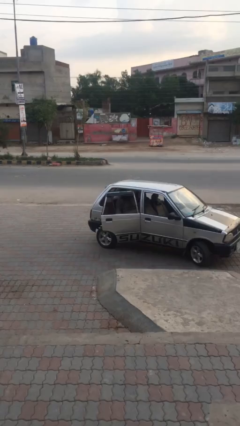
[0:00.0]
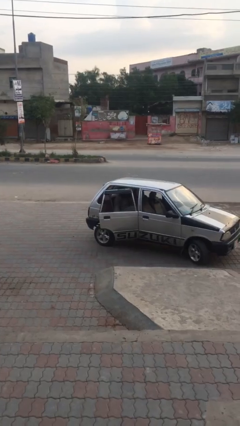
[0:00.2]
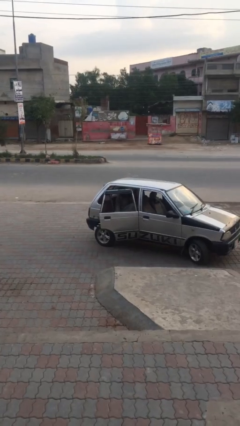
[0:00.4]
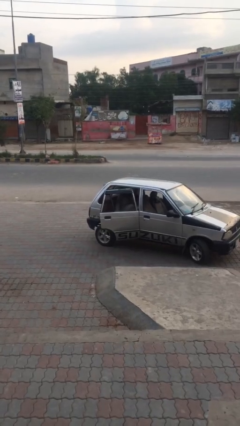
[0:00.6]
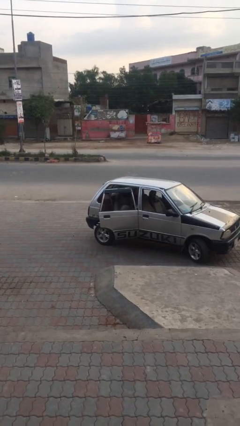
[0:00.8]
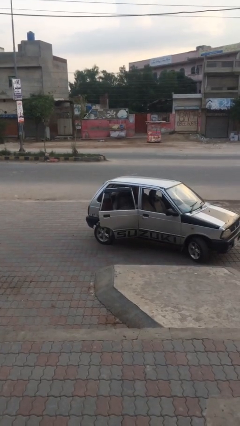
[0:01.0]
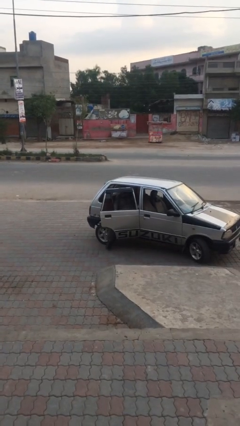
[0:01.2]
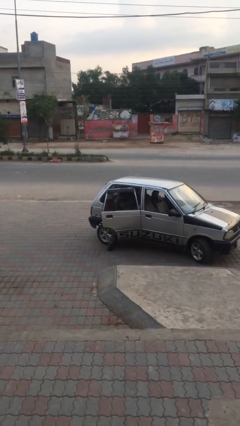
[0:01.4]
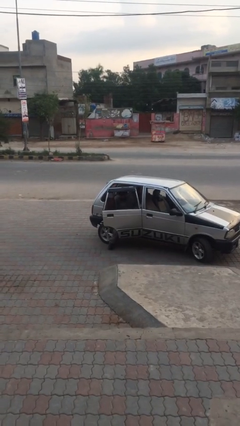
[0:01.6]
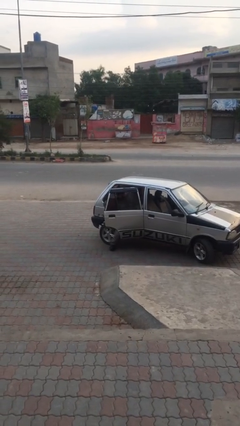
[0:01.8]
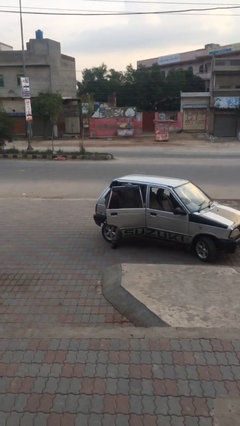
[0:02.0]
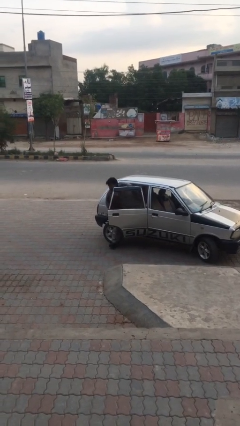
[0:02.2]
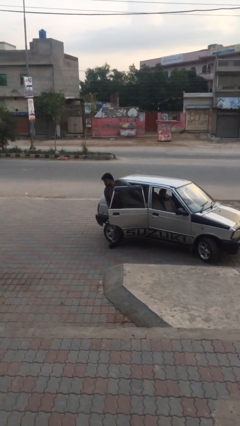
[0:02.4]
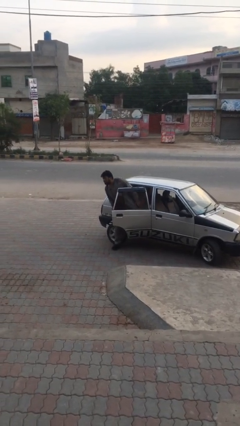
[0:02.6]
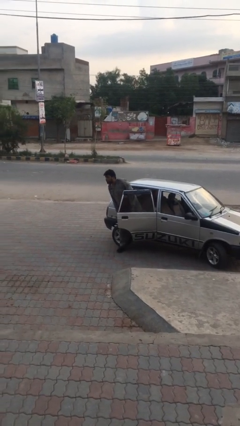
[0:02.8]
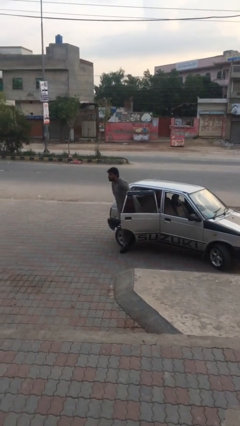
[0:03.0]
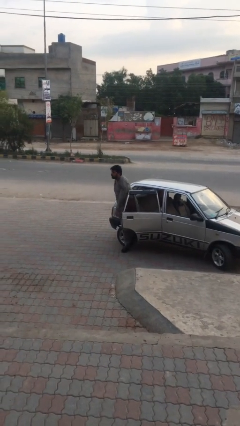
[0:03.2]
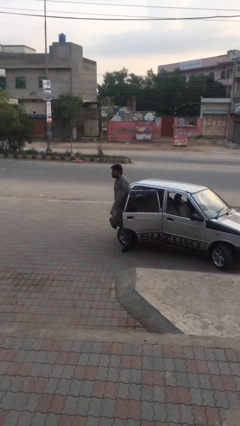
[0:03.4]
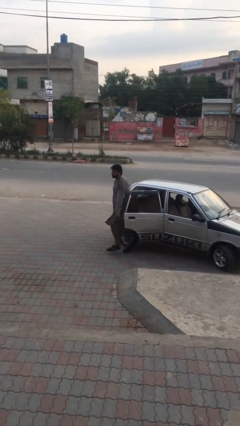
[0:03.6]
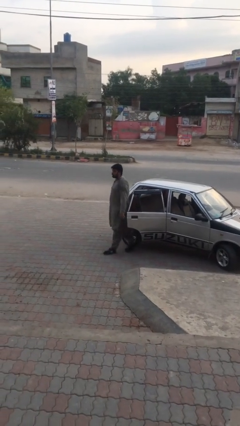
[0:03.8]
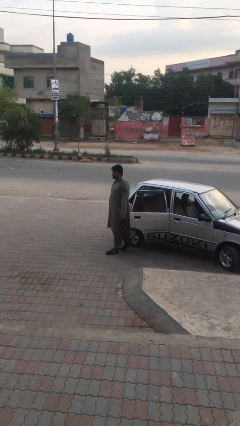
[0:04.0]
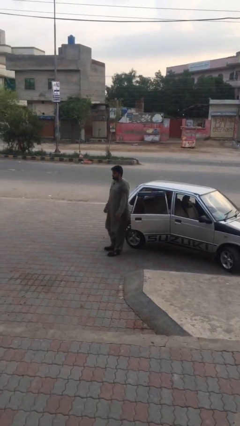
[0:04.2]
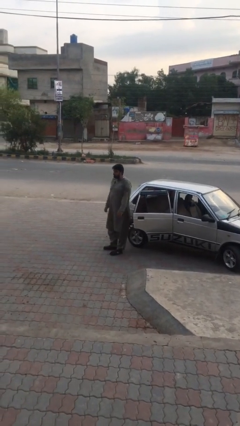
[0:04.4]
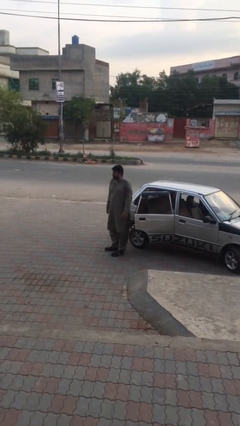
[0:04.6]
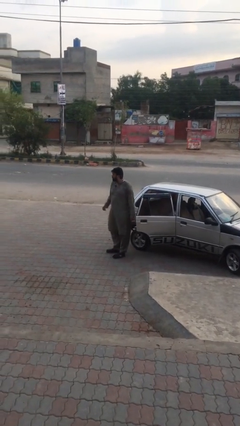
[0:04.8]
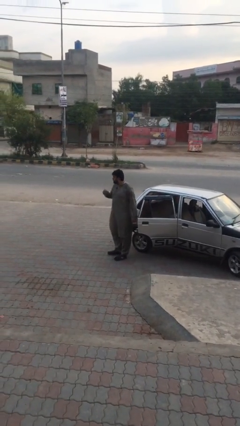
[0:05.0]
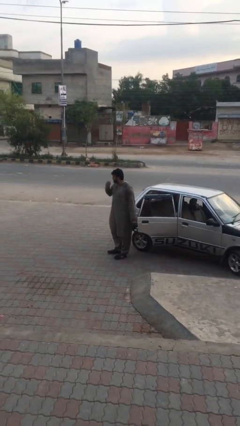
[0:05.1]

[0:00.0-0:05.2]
person exits car

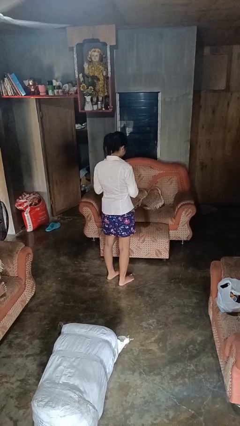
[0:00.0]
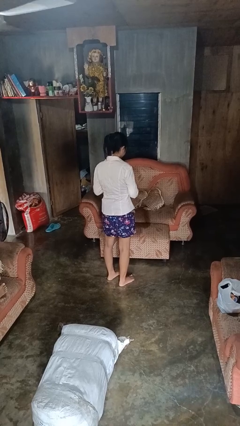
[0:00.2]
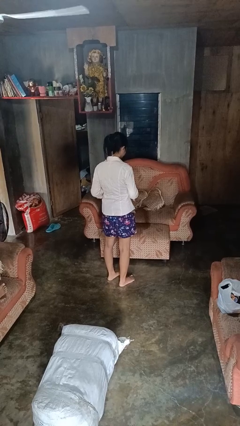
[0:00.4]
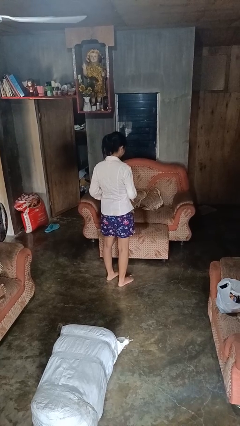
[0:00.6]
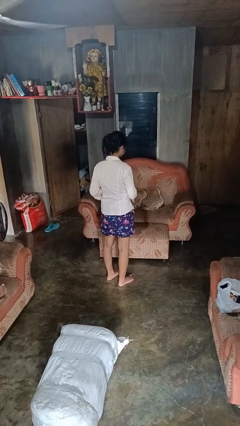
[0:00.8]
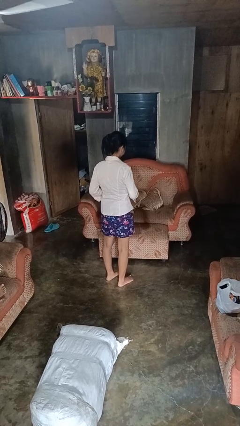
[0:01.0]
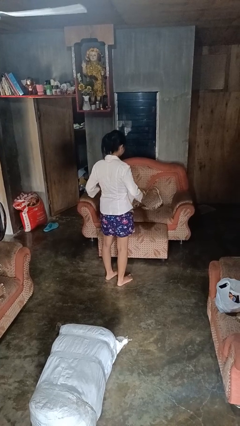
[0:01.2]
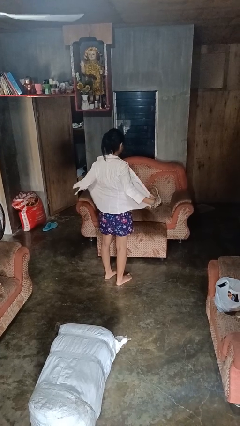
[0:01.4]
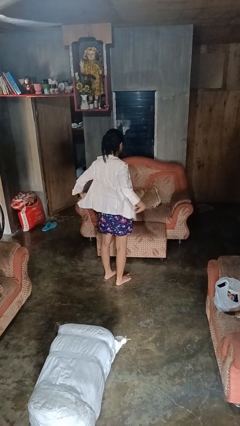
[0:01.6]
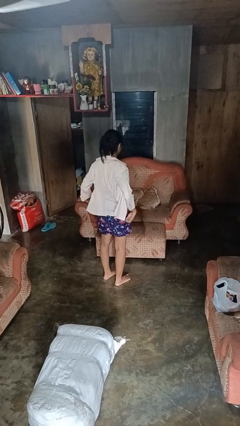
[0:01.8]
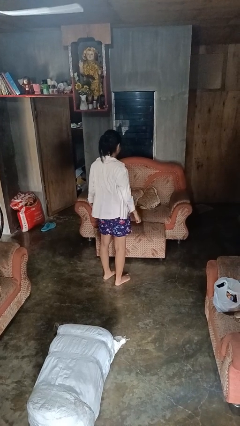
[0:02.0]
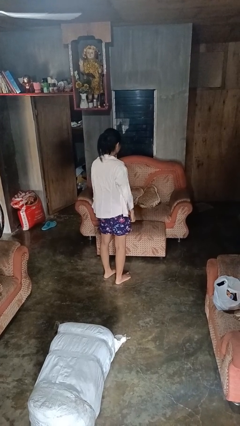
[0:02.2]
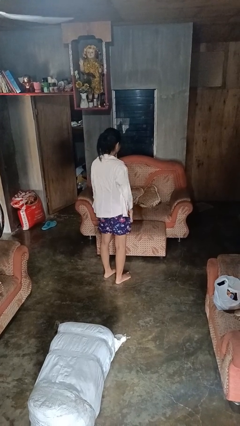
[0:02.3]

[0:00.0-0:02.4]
person unbuttons shirt

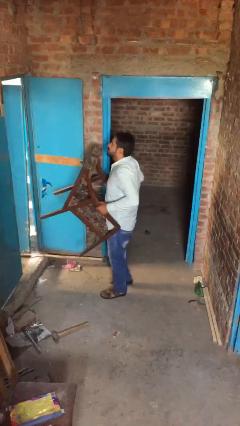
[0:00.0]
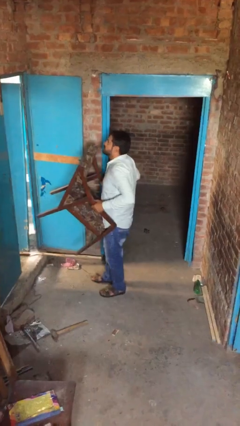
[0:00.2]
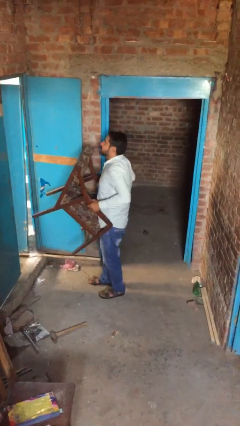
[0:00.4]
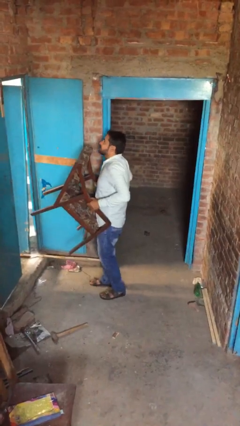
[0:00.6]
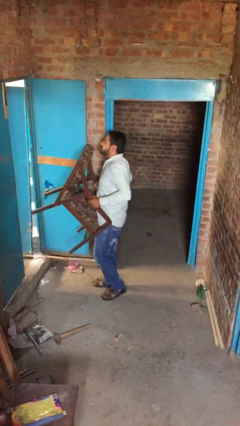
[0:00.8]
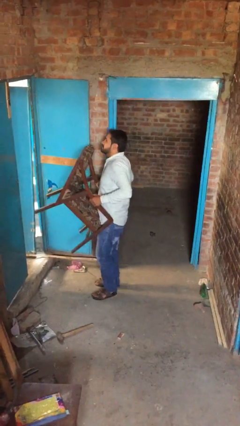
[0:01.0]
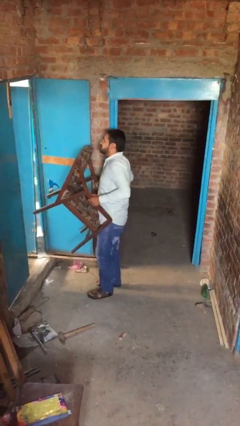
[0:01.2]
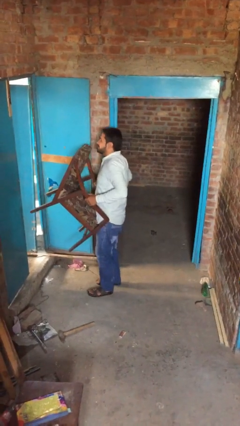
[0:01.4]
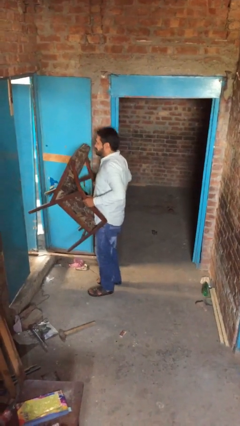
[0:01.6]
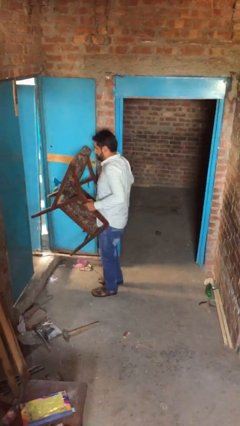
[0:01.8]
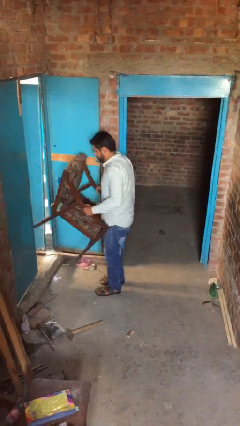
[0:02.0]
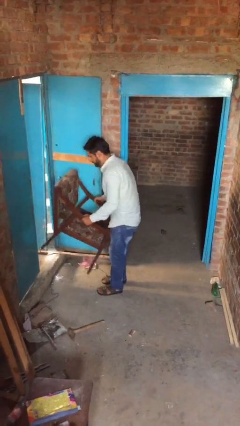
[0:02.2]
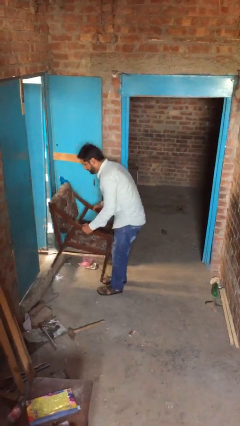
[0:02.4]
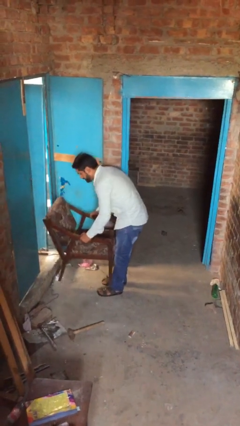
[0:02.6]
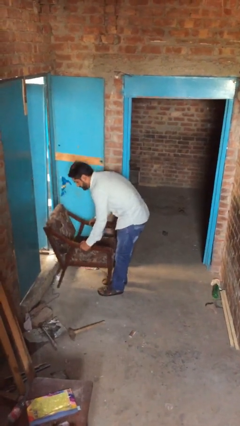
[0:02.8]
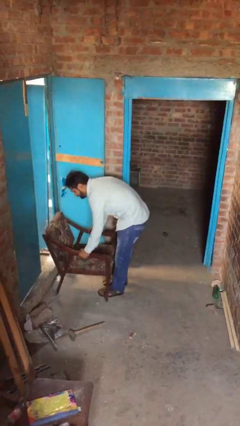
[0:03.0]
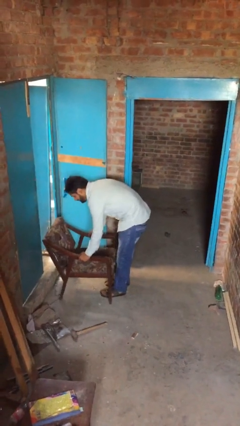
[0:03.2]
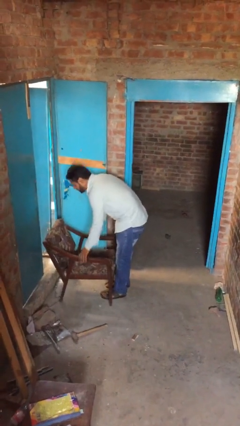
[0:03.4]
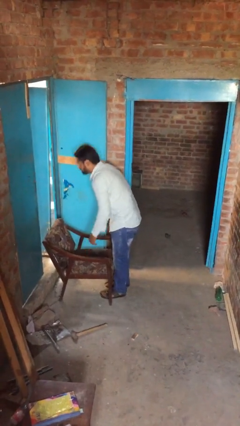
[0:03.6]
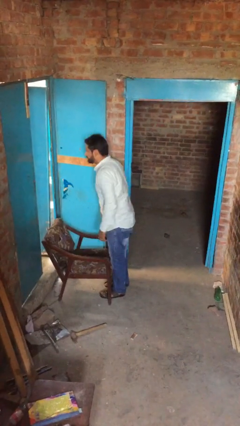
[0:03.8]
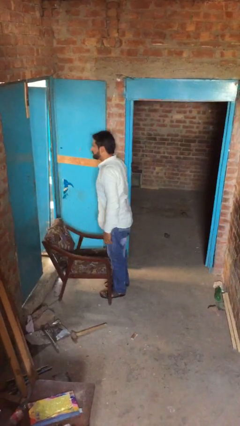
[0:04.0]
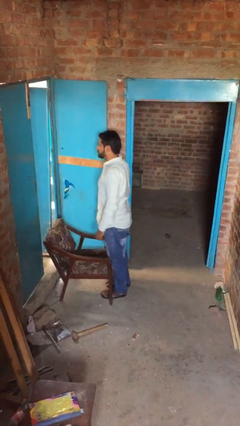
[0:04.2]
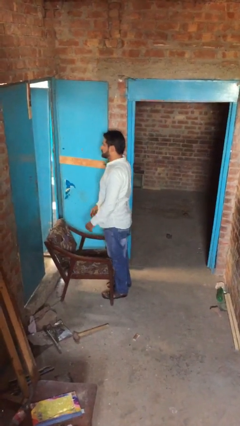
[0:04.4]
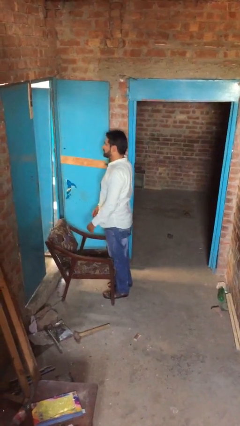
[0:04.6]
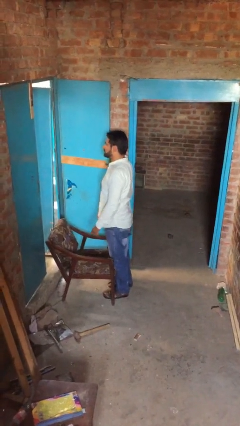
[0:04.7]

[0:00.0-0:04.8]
person puts down object on floor

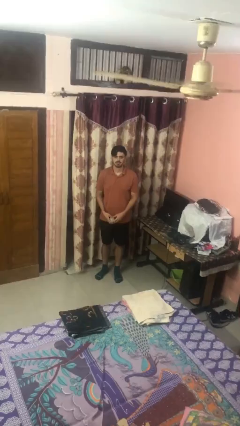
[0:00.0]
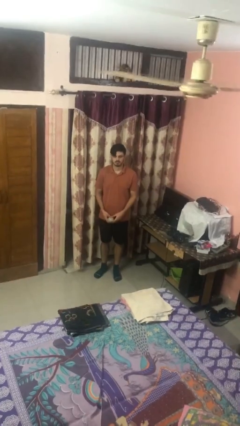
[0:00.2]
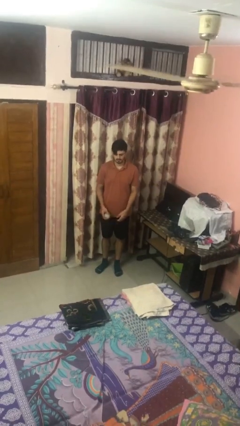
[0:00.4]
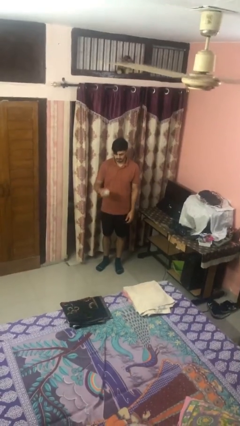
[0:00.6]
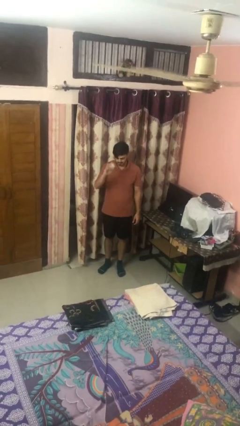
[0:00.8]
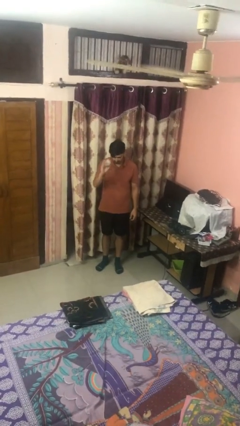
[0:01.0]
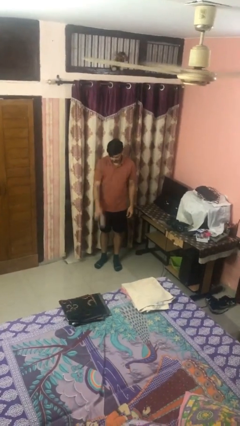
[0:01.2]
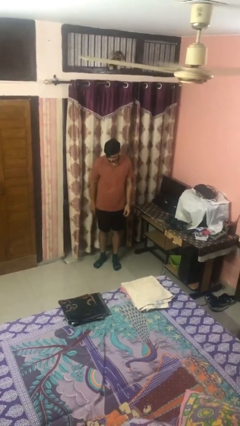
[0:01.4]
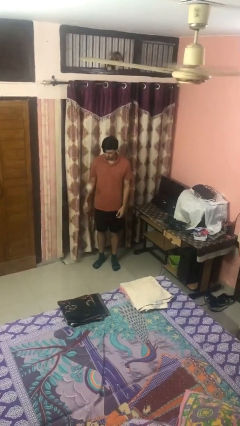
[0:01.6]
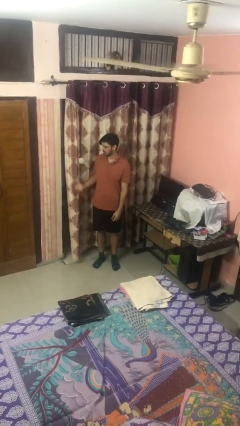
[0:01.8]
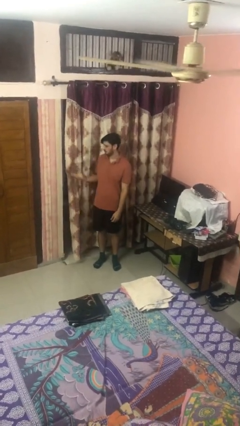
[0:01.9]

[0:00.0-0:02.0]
person bounces ball on floor

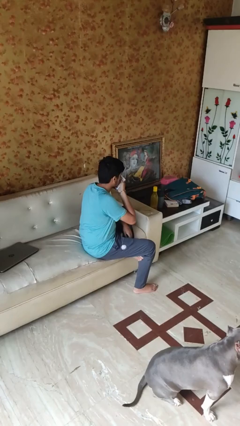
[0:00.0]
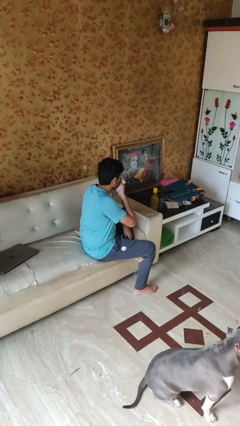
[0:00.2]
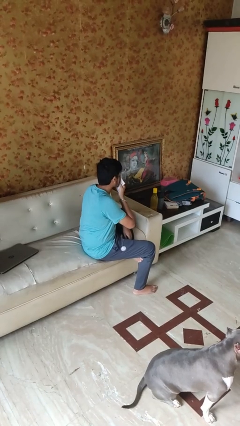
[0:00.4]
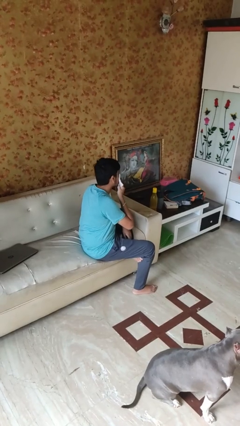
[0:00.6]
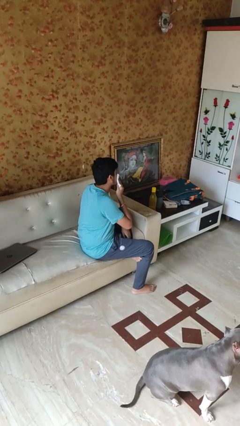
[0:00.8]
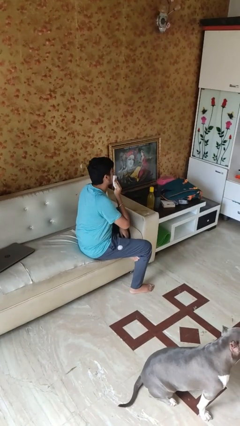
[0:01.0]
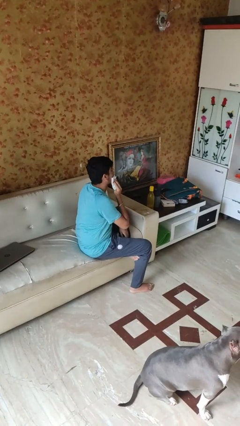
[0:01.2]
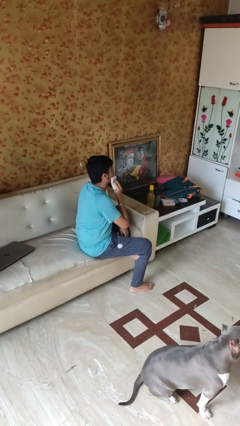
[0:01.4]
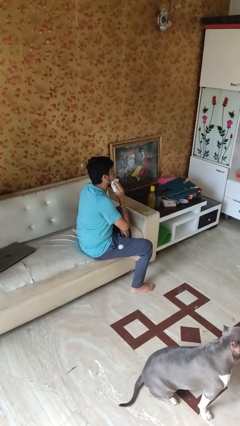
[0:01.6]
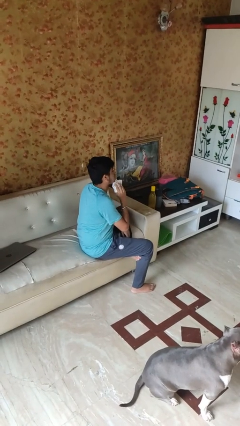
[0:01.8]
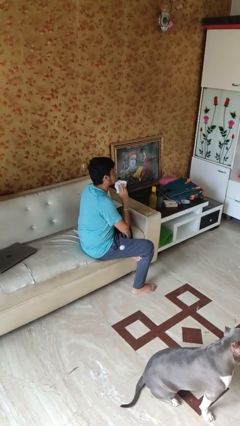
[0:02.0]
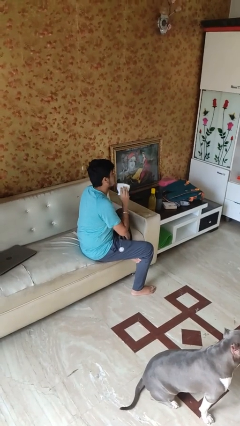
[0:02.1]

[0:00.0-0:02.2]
person wipes mouth with napkin

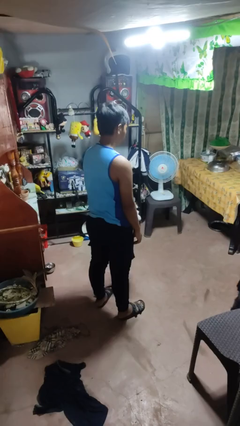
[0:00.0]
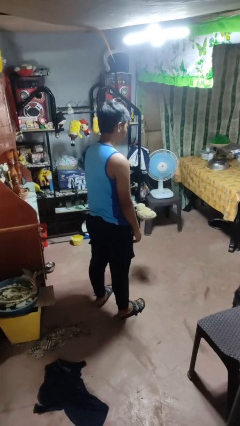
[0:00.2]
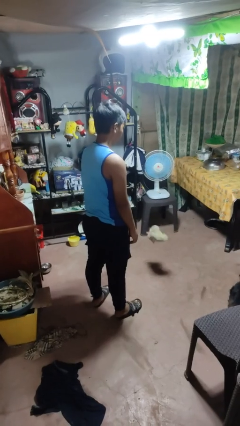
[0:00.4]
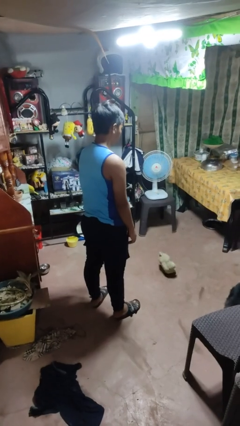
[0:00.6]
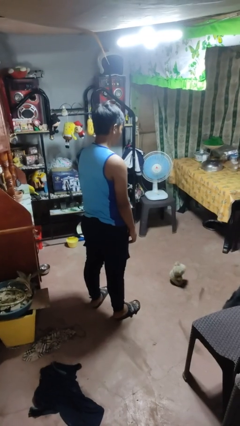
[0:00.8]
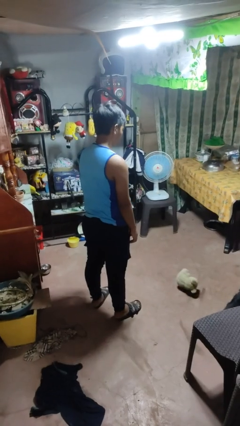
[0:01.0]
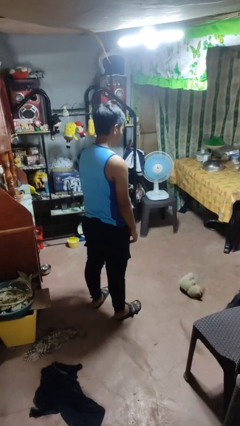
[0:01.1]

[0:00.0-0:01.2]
person throws object to ground
